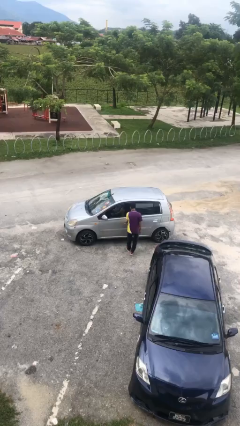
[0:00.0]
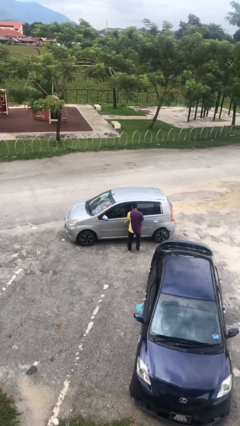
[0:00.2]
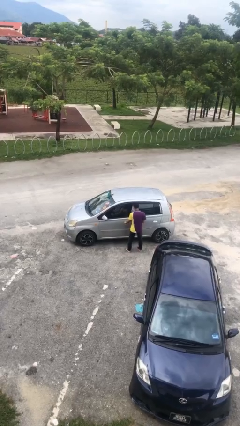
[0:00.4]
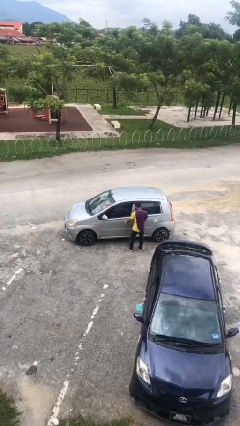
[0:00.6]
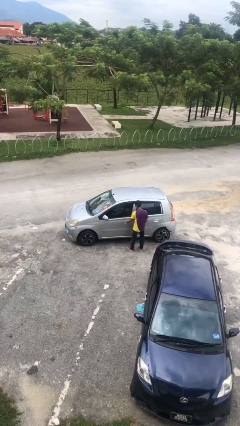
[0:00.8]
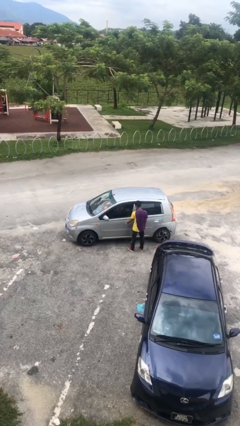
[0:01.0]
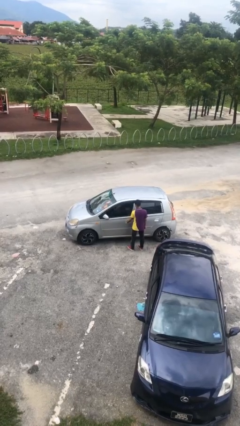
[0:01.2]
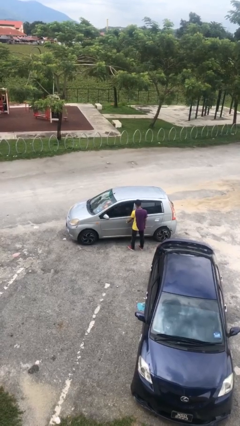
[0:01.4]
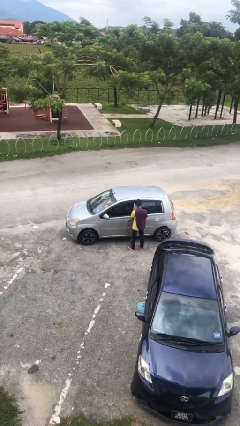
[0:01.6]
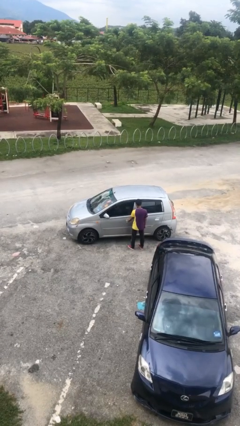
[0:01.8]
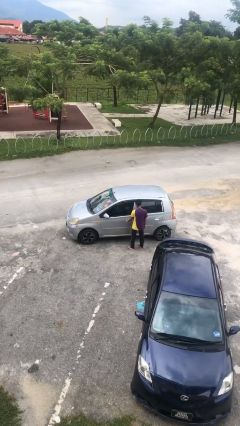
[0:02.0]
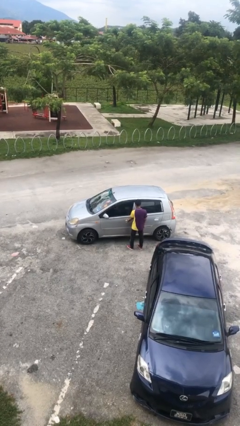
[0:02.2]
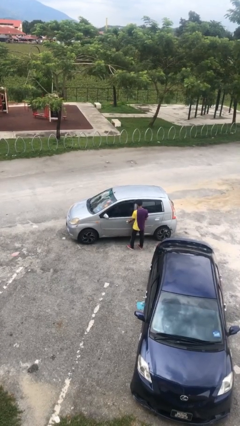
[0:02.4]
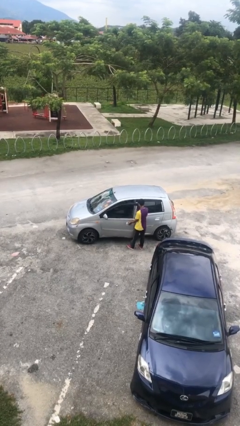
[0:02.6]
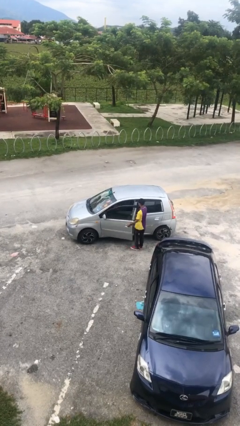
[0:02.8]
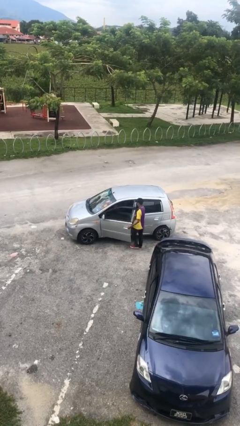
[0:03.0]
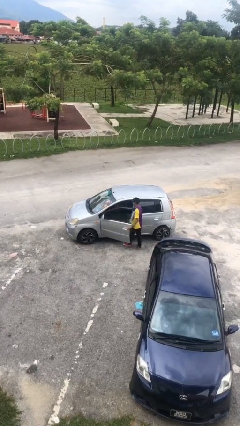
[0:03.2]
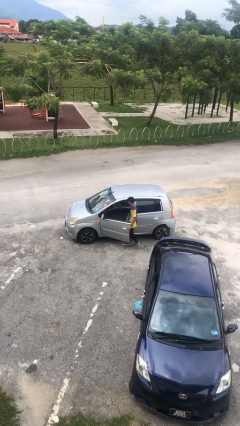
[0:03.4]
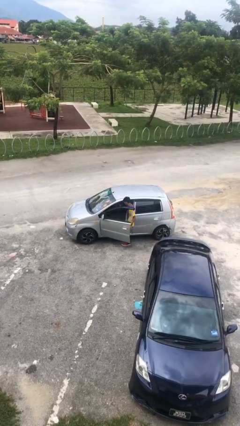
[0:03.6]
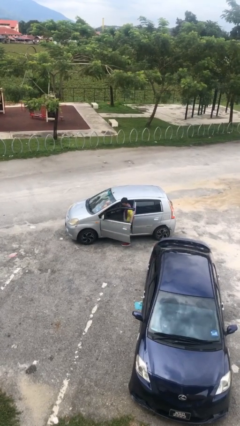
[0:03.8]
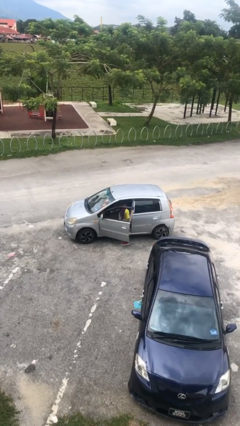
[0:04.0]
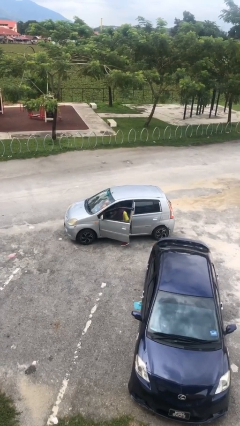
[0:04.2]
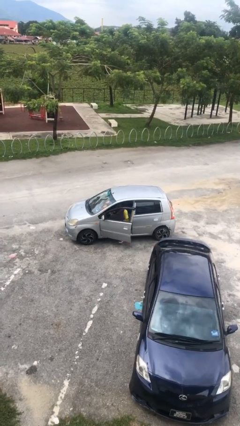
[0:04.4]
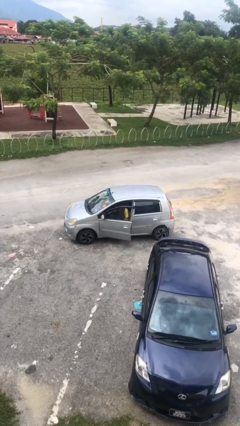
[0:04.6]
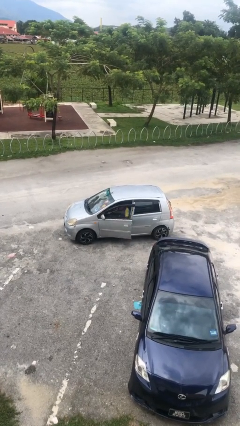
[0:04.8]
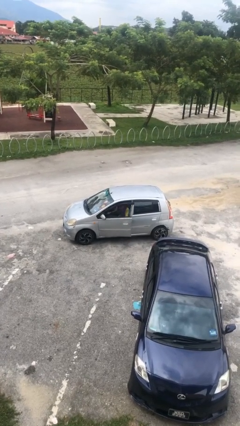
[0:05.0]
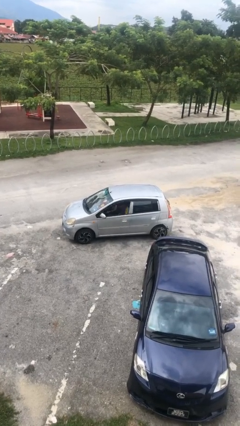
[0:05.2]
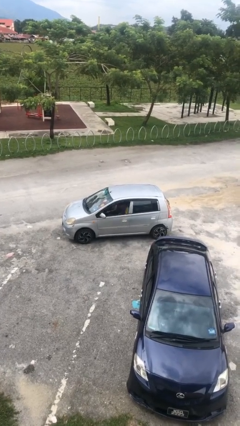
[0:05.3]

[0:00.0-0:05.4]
car picks up person

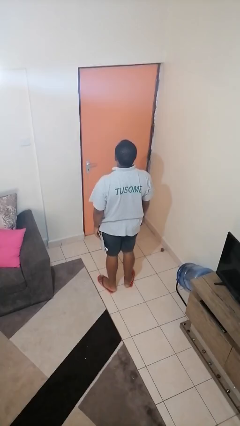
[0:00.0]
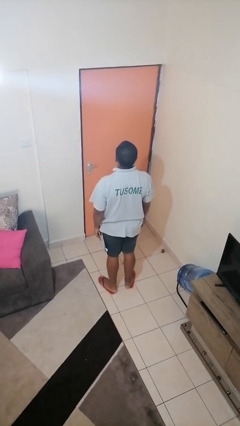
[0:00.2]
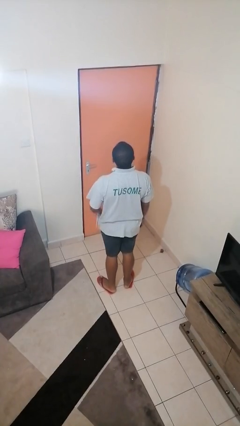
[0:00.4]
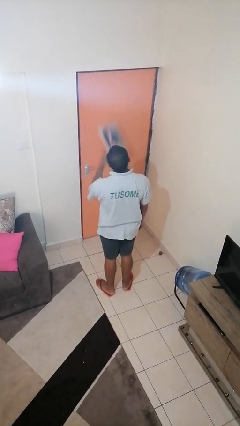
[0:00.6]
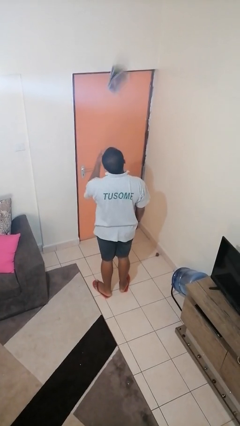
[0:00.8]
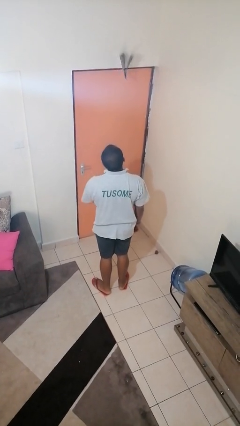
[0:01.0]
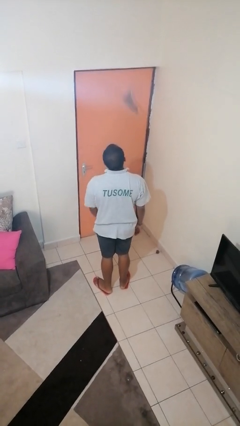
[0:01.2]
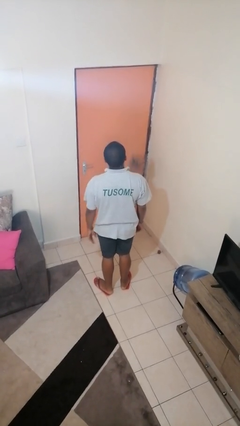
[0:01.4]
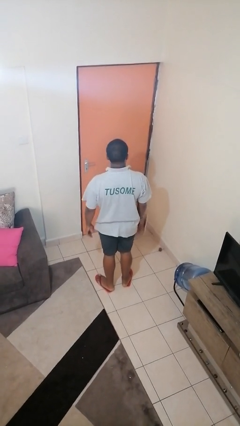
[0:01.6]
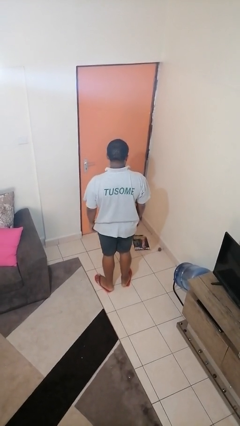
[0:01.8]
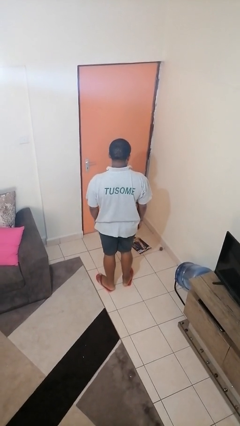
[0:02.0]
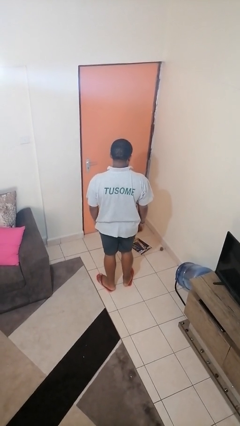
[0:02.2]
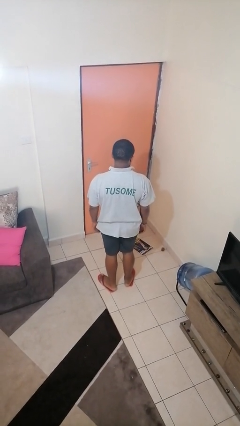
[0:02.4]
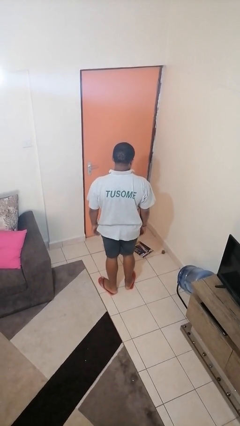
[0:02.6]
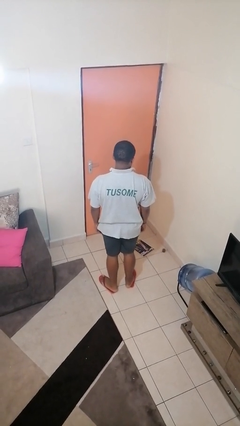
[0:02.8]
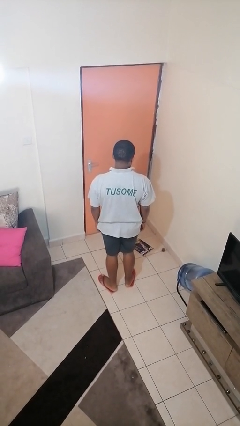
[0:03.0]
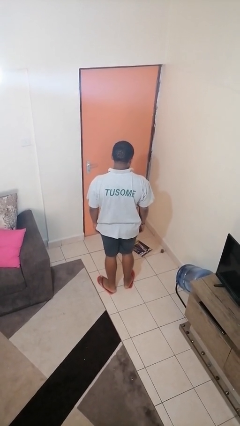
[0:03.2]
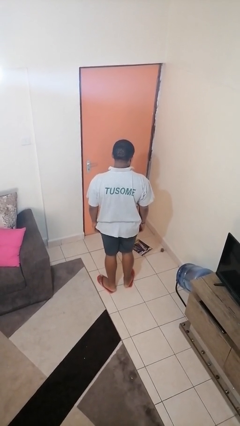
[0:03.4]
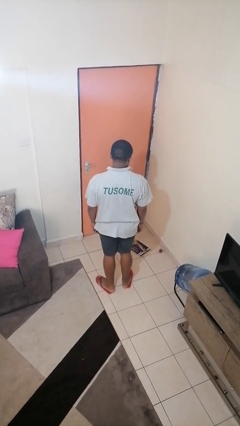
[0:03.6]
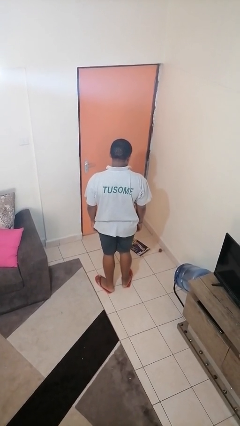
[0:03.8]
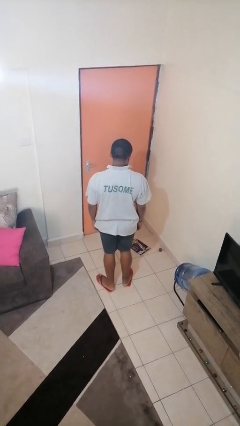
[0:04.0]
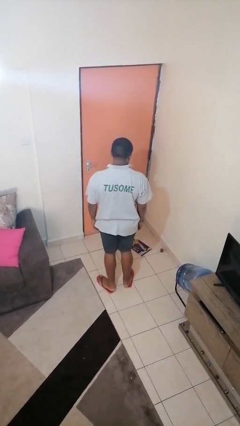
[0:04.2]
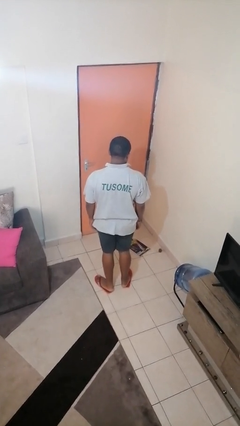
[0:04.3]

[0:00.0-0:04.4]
person throws object into air

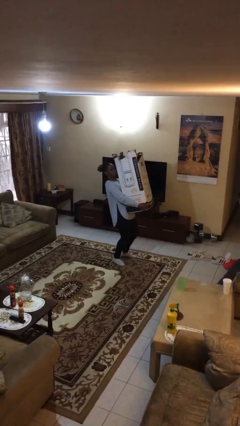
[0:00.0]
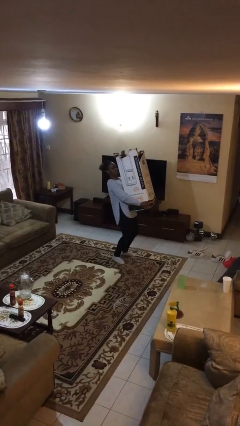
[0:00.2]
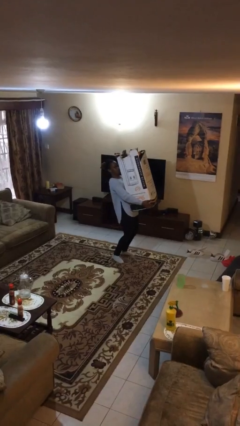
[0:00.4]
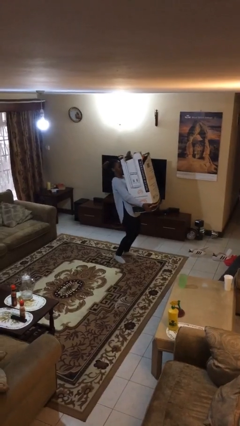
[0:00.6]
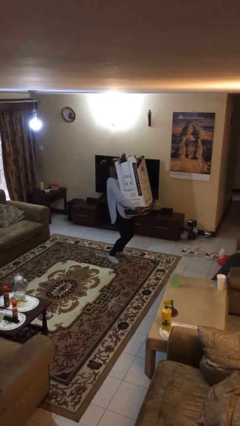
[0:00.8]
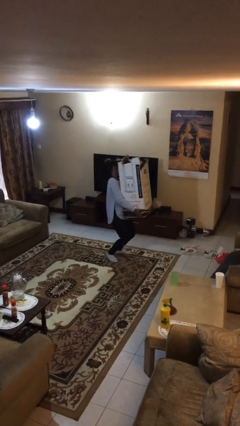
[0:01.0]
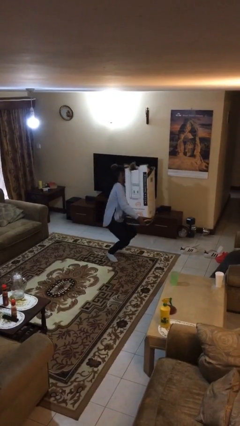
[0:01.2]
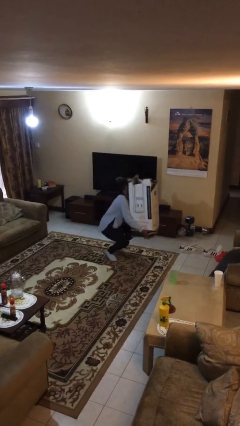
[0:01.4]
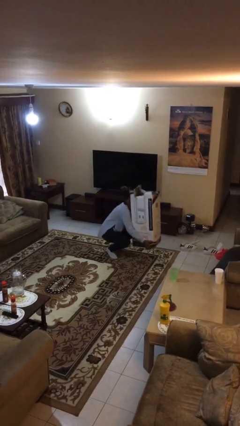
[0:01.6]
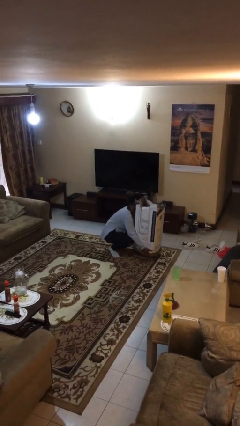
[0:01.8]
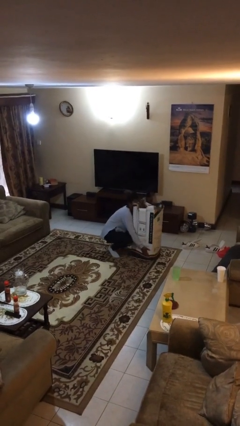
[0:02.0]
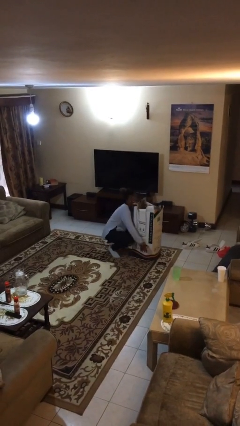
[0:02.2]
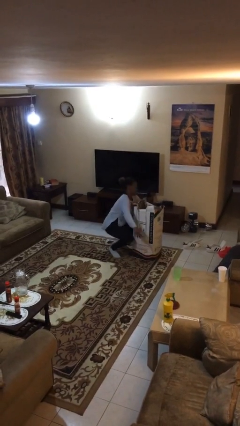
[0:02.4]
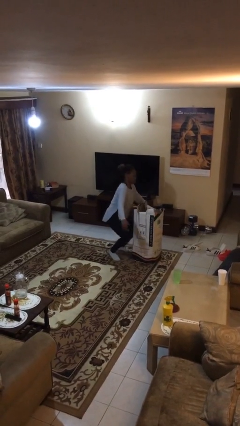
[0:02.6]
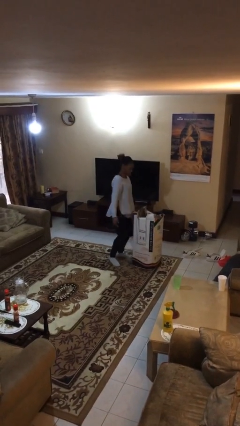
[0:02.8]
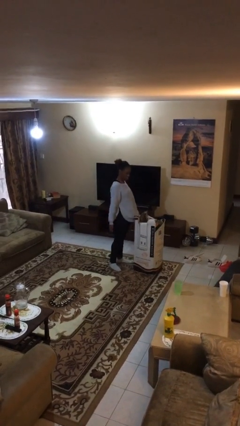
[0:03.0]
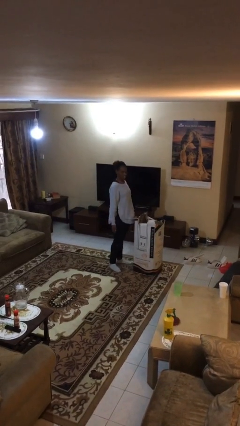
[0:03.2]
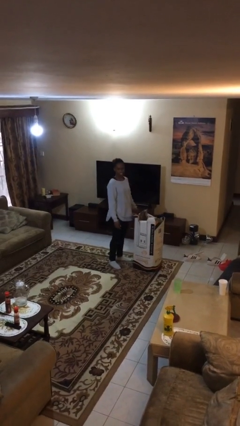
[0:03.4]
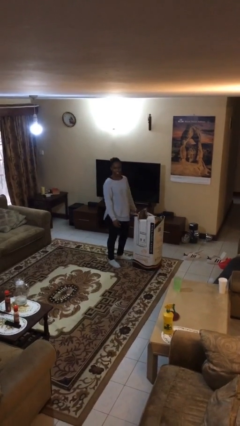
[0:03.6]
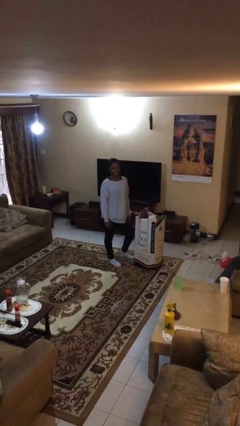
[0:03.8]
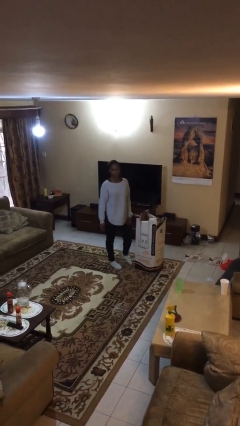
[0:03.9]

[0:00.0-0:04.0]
person puts down object on floor

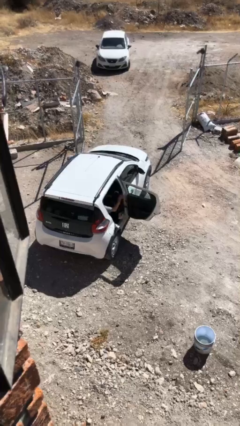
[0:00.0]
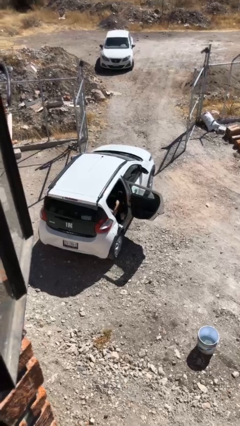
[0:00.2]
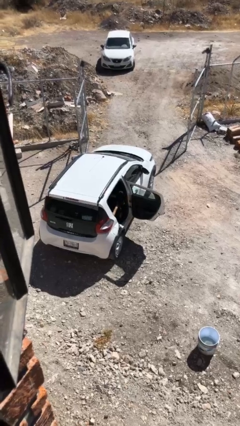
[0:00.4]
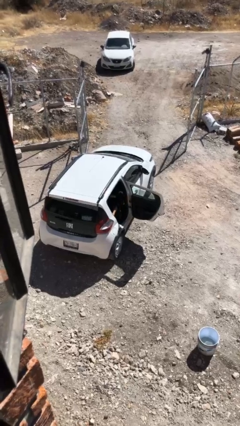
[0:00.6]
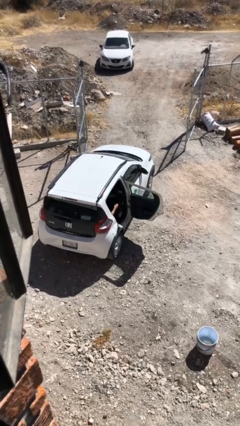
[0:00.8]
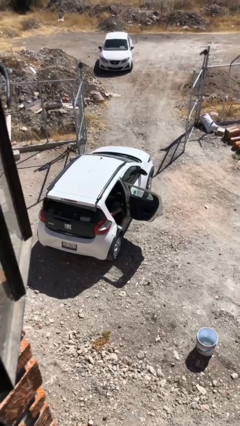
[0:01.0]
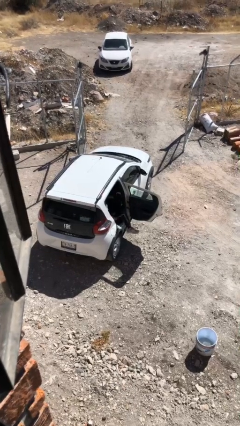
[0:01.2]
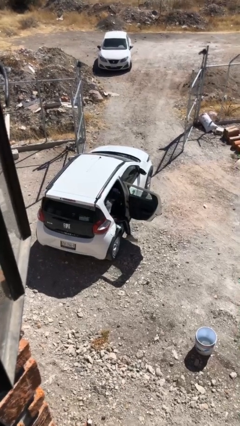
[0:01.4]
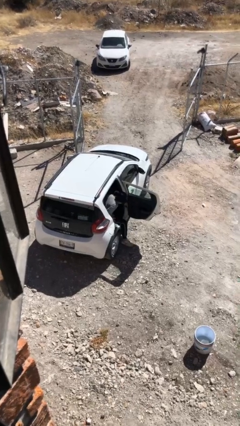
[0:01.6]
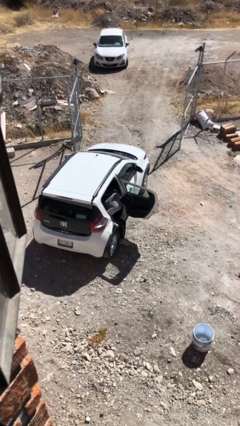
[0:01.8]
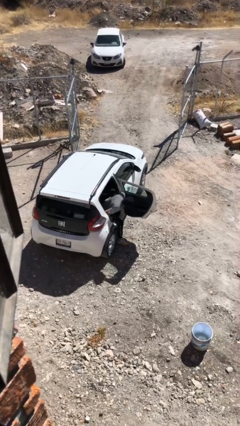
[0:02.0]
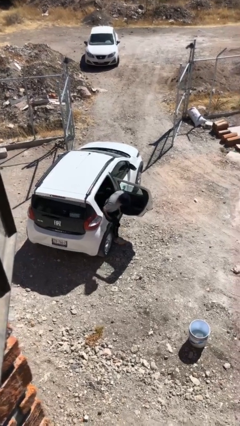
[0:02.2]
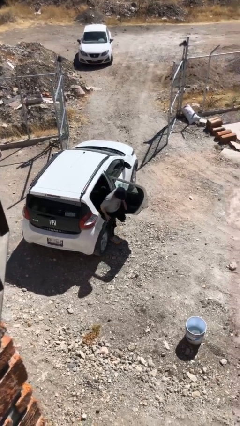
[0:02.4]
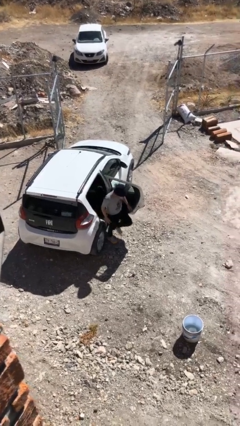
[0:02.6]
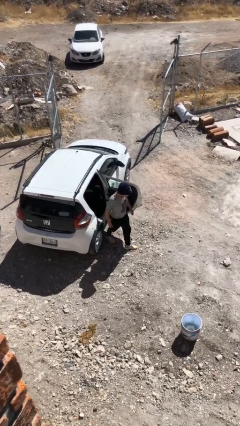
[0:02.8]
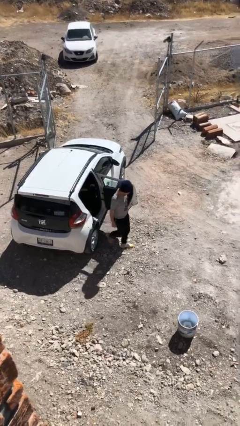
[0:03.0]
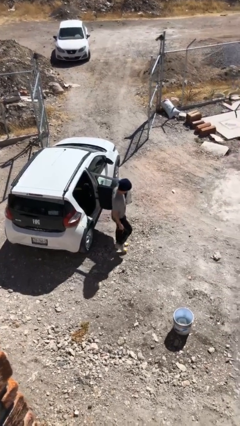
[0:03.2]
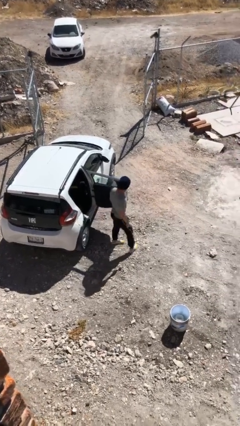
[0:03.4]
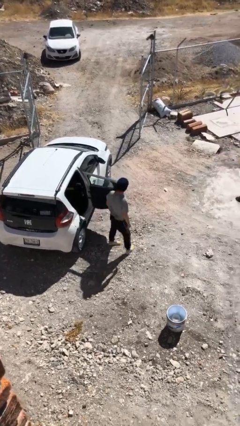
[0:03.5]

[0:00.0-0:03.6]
person exits car
